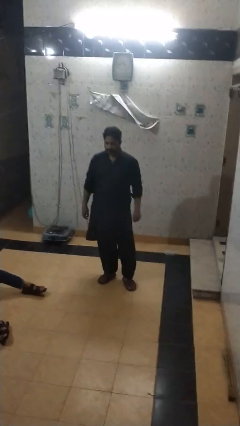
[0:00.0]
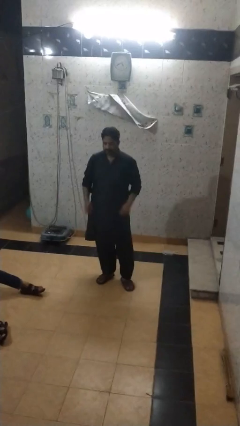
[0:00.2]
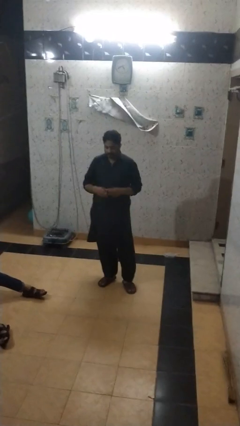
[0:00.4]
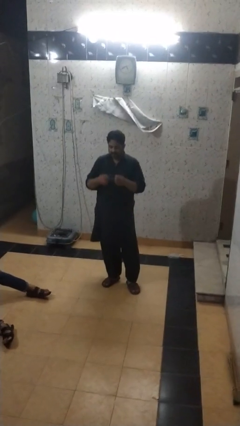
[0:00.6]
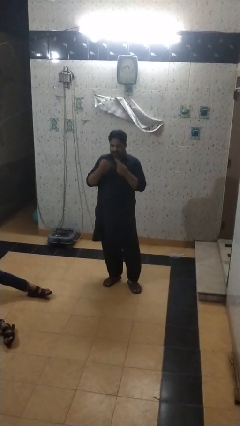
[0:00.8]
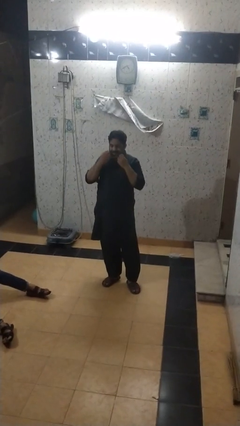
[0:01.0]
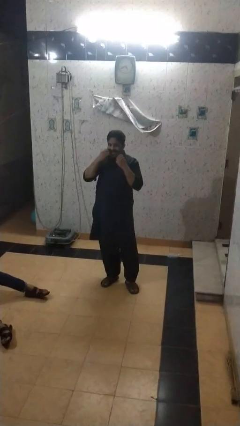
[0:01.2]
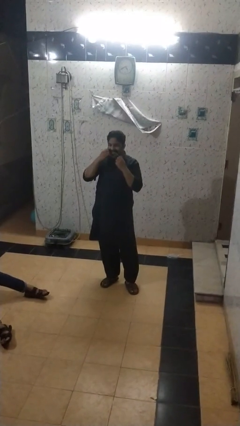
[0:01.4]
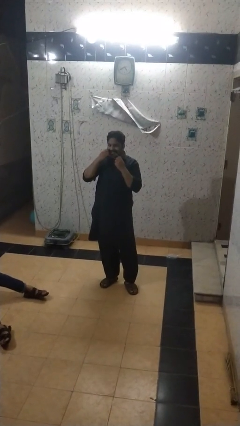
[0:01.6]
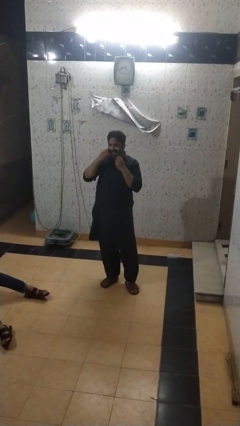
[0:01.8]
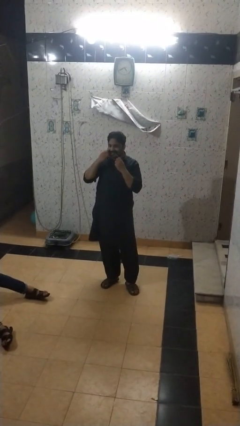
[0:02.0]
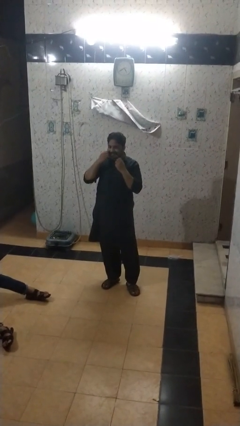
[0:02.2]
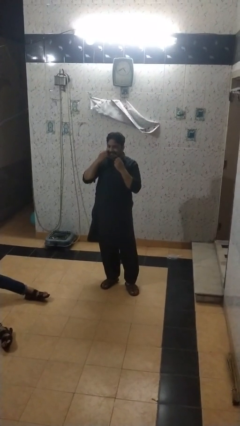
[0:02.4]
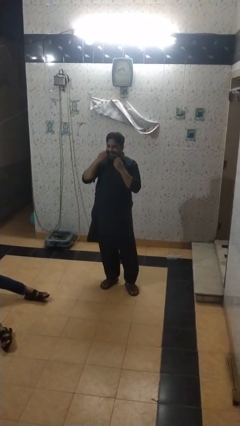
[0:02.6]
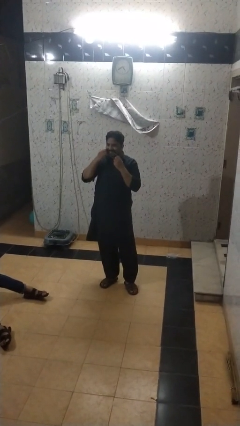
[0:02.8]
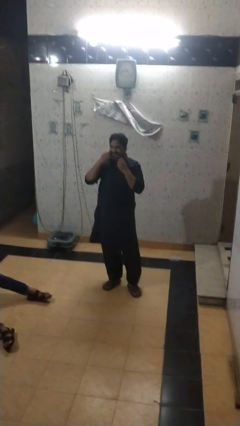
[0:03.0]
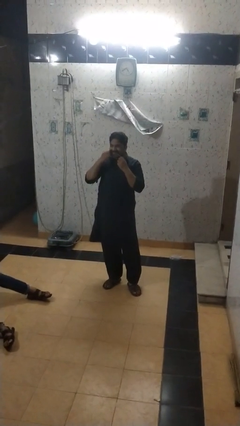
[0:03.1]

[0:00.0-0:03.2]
person flosses

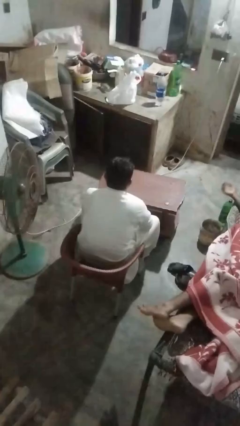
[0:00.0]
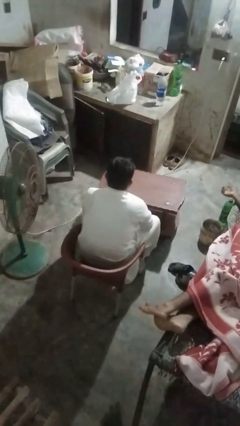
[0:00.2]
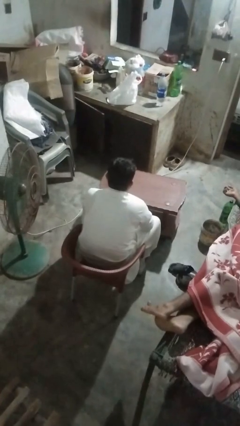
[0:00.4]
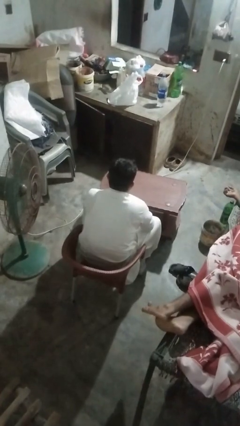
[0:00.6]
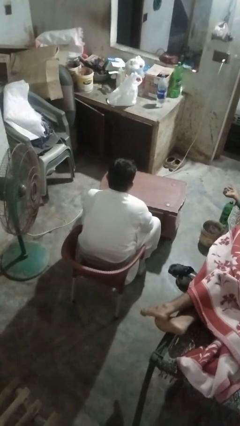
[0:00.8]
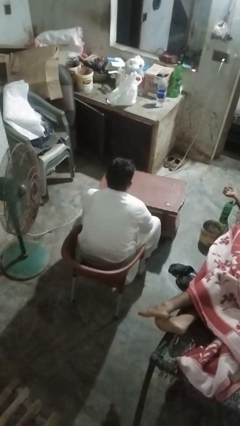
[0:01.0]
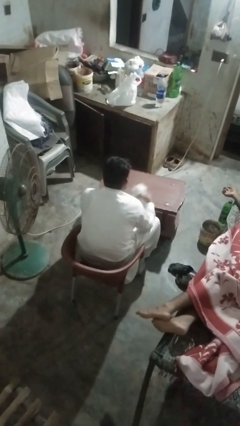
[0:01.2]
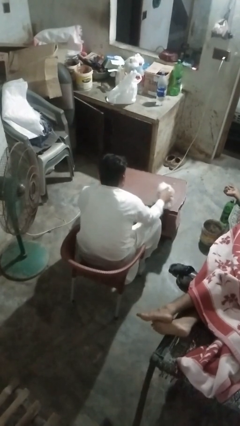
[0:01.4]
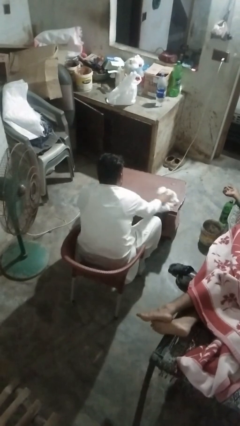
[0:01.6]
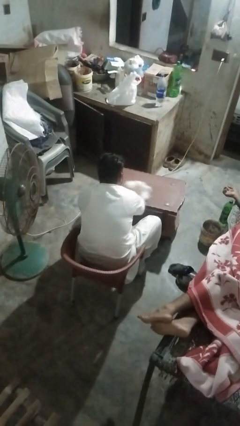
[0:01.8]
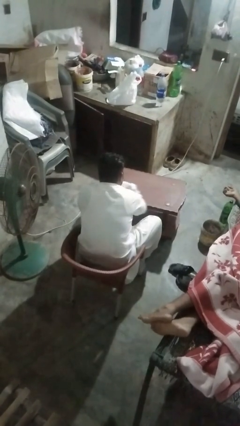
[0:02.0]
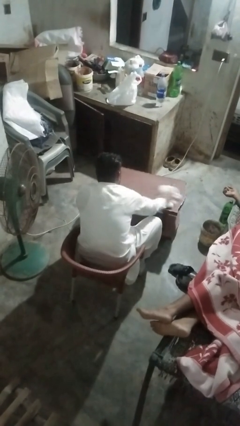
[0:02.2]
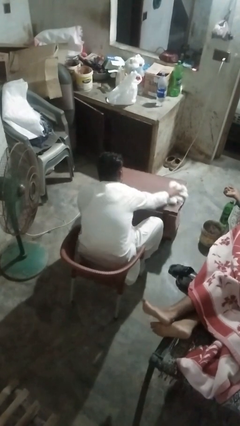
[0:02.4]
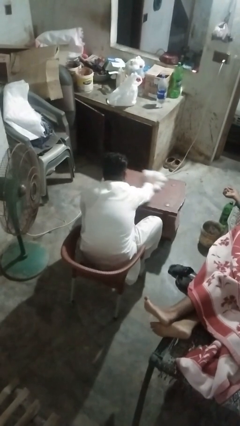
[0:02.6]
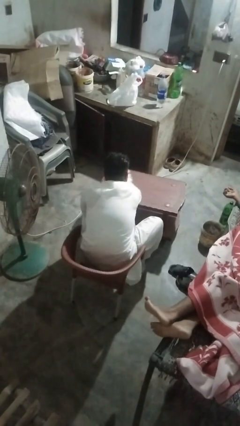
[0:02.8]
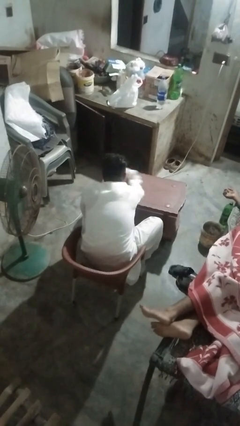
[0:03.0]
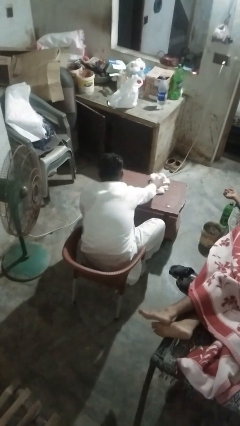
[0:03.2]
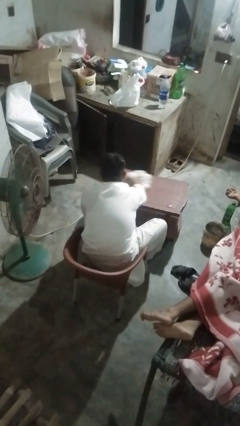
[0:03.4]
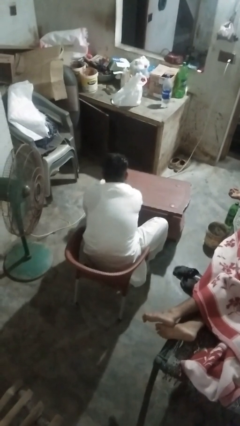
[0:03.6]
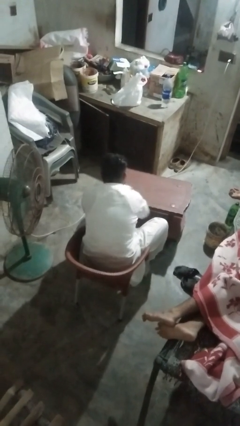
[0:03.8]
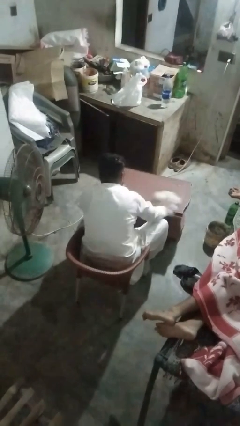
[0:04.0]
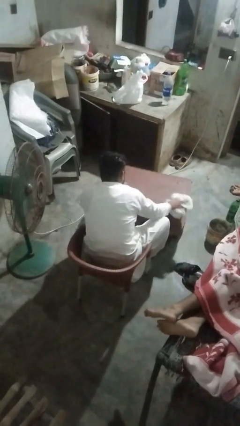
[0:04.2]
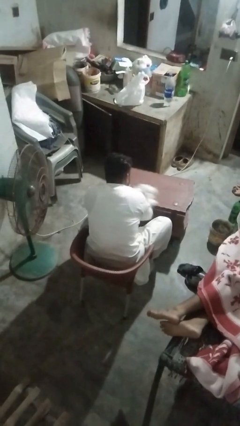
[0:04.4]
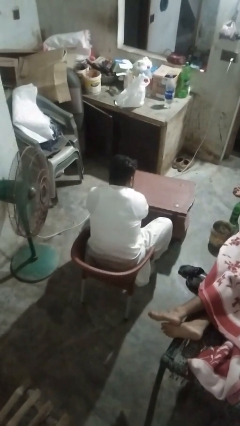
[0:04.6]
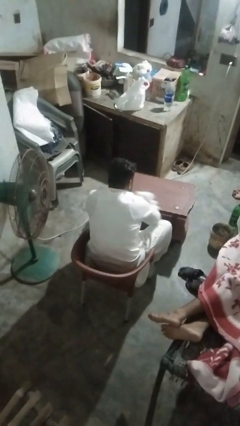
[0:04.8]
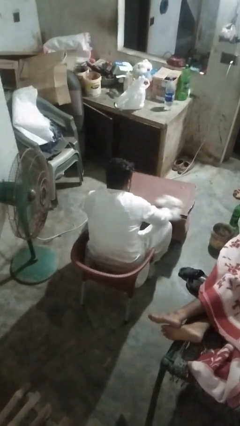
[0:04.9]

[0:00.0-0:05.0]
person cleans table with rag

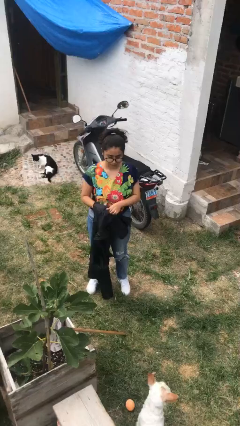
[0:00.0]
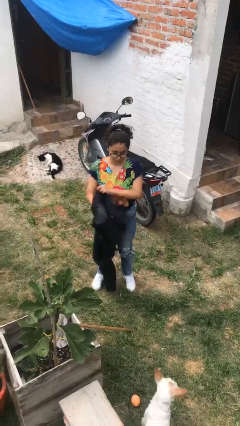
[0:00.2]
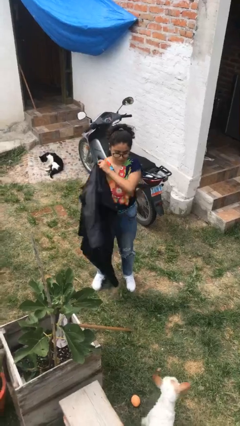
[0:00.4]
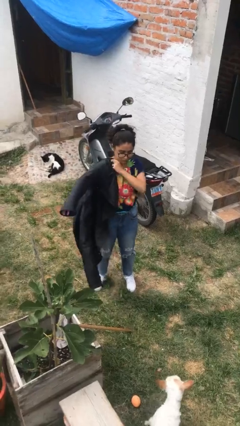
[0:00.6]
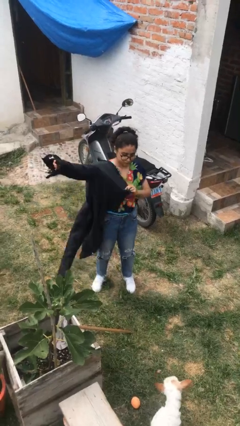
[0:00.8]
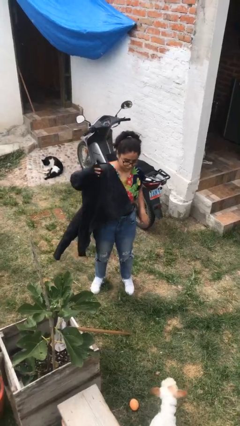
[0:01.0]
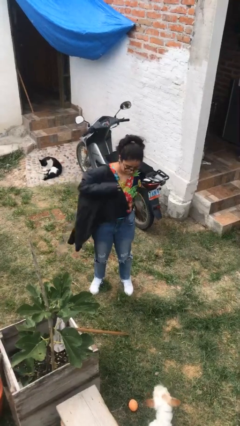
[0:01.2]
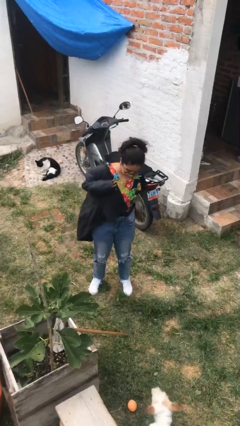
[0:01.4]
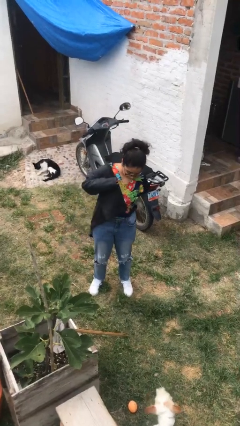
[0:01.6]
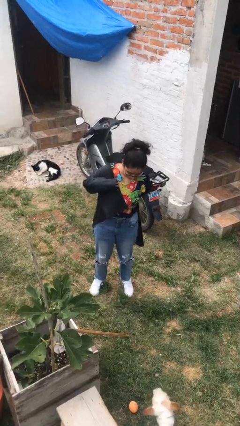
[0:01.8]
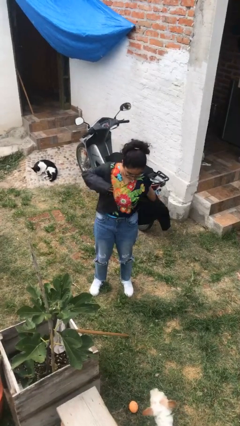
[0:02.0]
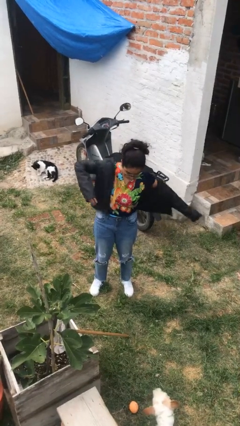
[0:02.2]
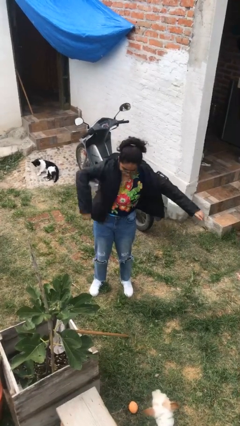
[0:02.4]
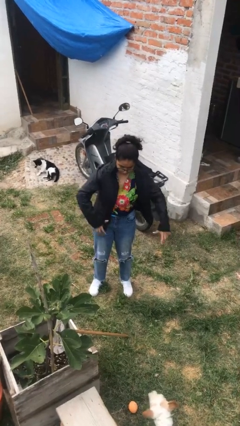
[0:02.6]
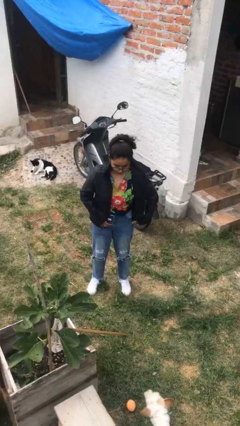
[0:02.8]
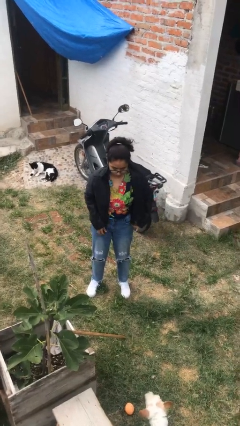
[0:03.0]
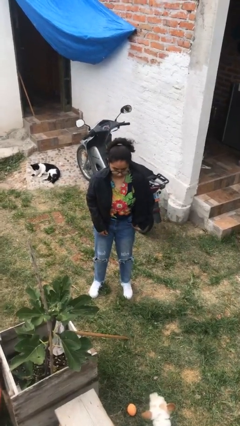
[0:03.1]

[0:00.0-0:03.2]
person puts on jacket

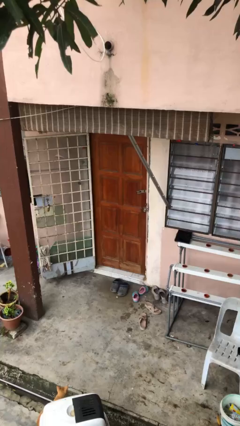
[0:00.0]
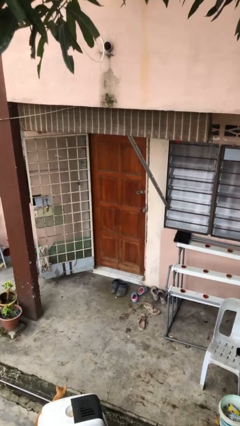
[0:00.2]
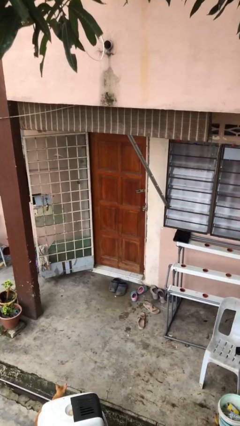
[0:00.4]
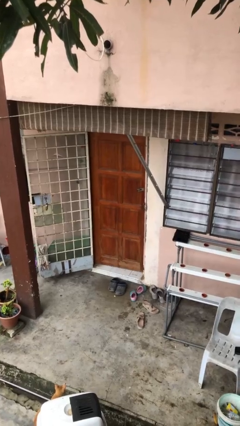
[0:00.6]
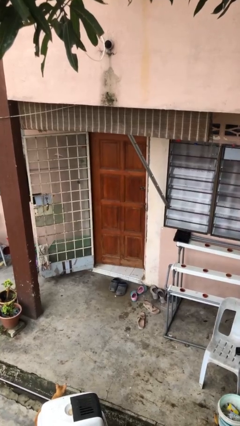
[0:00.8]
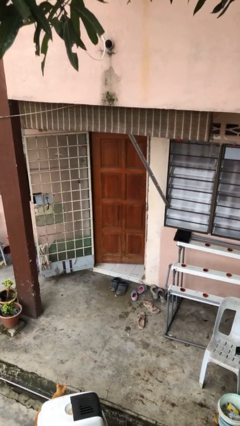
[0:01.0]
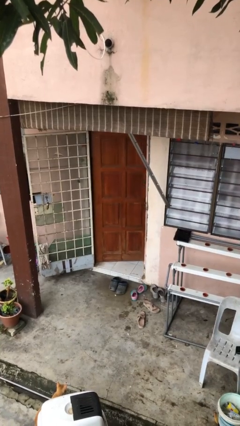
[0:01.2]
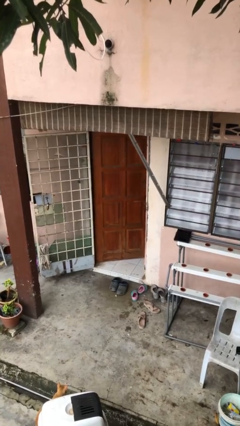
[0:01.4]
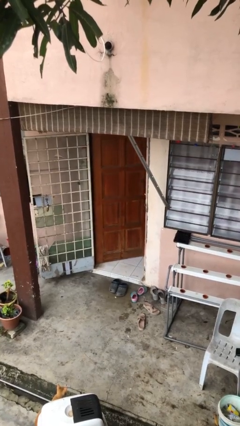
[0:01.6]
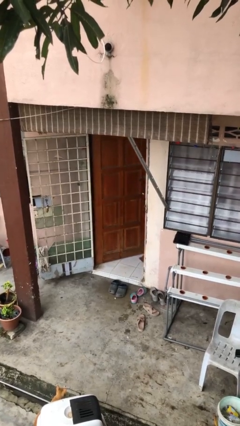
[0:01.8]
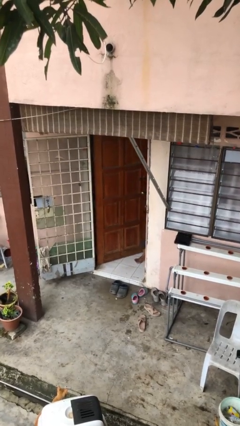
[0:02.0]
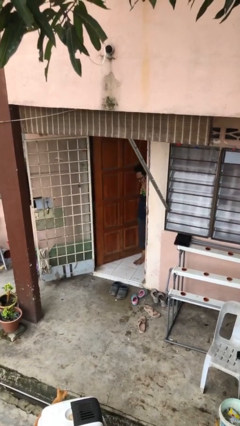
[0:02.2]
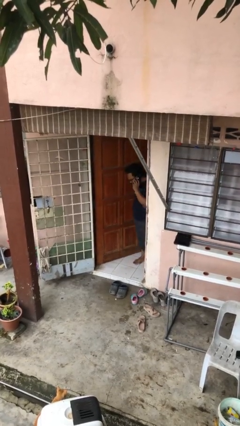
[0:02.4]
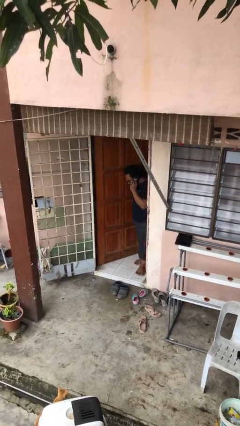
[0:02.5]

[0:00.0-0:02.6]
person opens facility door

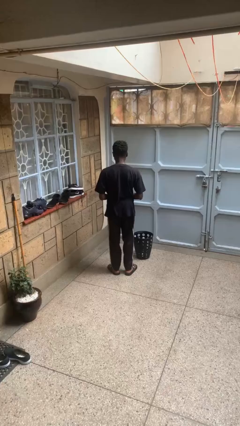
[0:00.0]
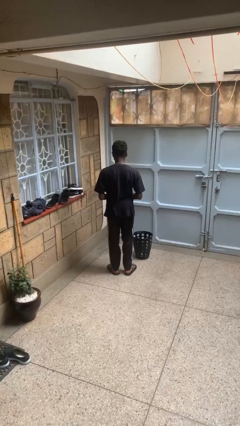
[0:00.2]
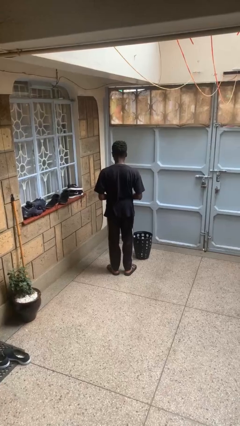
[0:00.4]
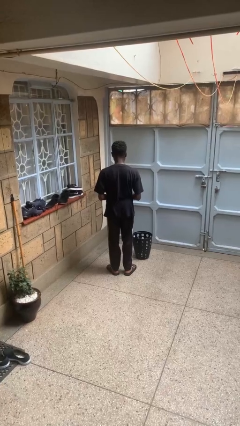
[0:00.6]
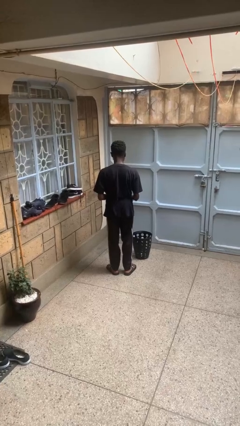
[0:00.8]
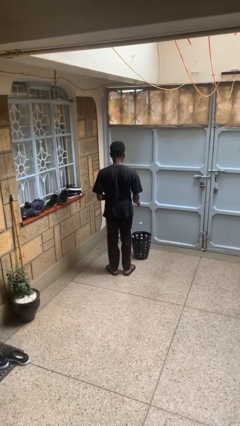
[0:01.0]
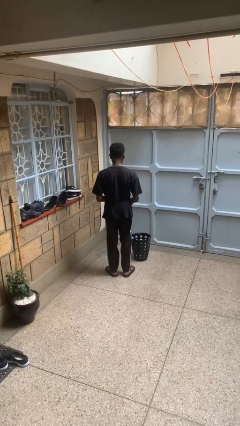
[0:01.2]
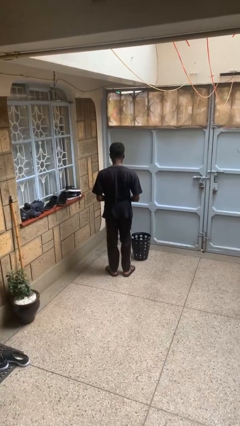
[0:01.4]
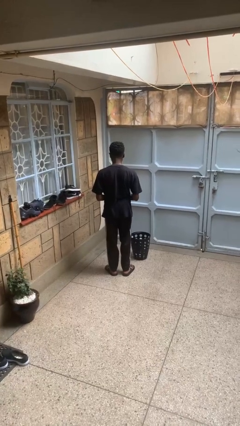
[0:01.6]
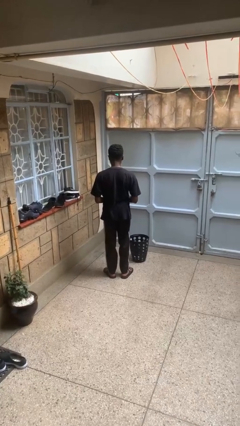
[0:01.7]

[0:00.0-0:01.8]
person discards trash

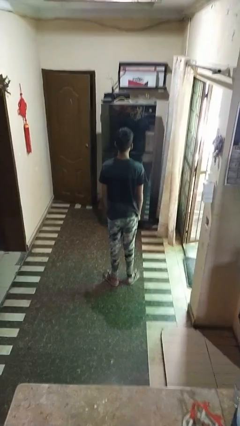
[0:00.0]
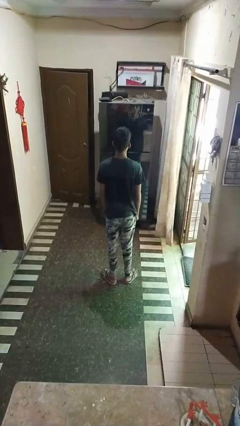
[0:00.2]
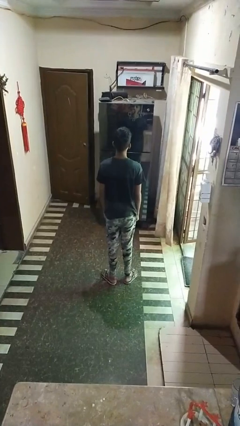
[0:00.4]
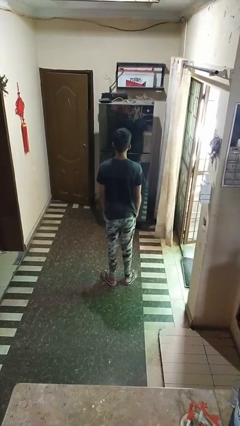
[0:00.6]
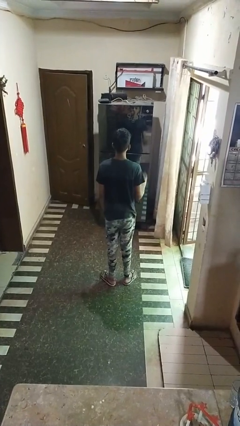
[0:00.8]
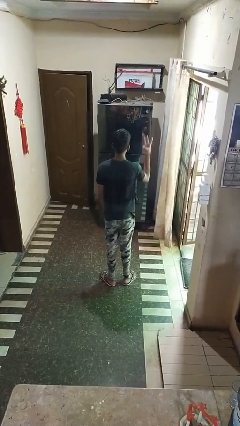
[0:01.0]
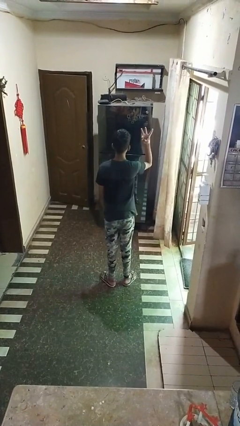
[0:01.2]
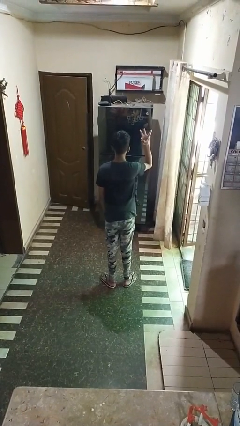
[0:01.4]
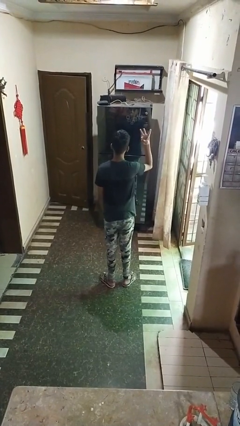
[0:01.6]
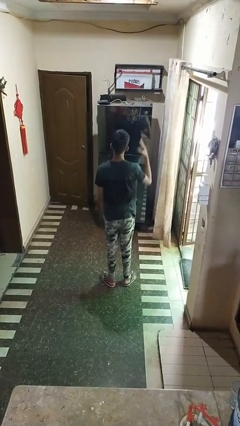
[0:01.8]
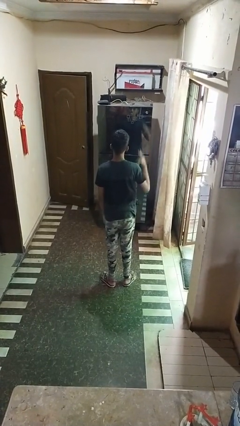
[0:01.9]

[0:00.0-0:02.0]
person gestures number three
